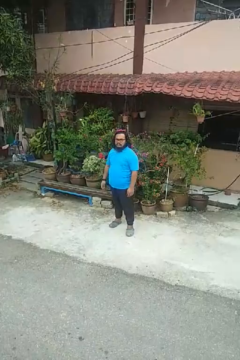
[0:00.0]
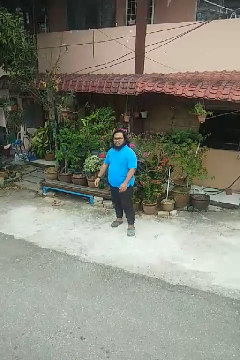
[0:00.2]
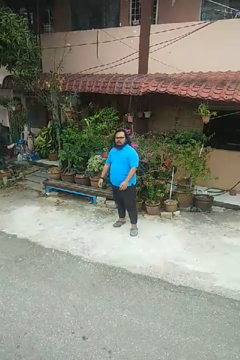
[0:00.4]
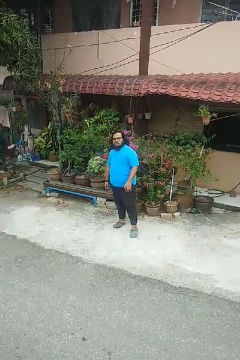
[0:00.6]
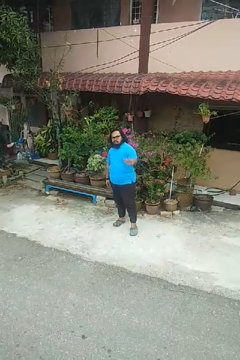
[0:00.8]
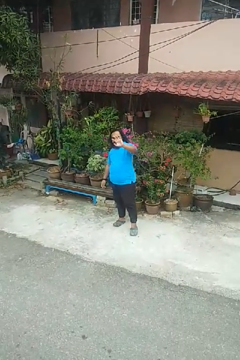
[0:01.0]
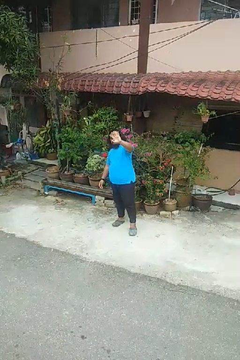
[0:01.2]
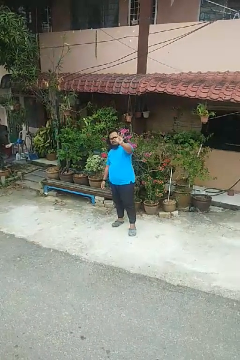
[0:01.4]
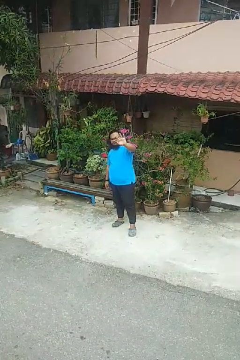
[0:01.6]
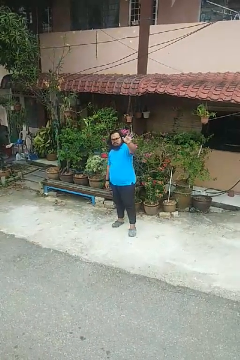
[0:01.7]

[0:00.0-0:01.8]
person waves at person

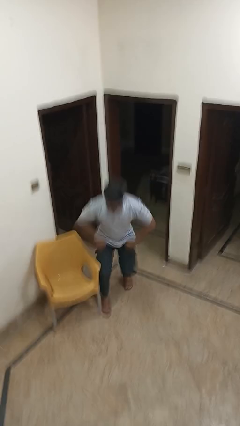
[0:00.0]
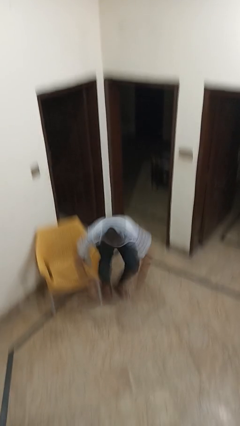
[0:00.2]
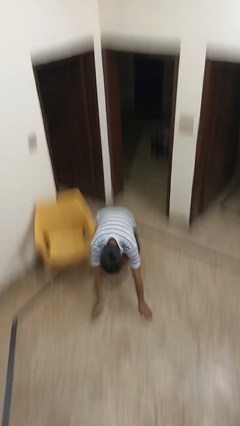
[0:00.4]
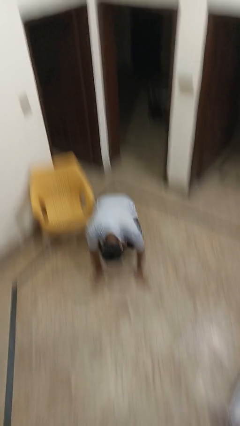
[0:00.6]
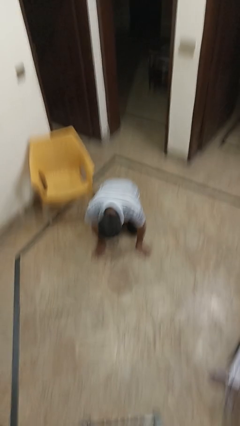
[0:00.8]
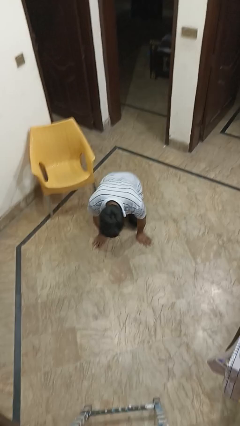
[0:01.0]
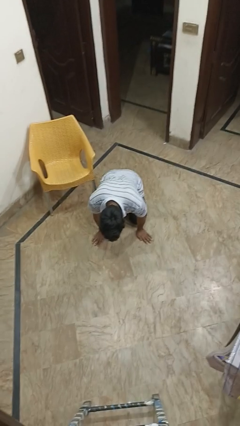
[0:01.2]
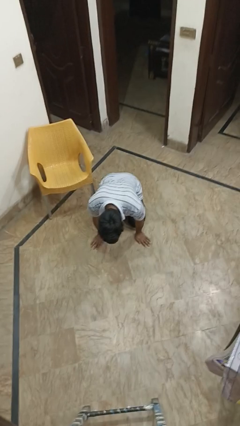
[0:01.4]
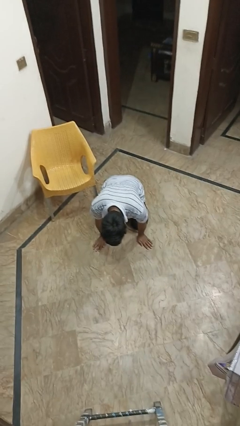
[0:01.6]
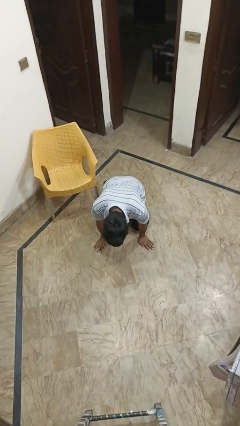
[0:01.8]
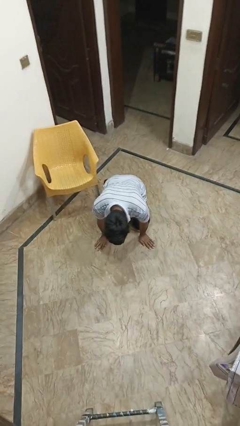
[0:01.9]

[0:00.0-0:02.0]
person trips on object on floor

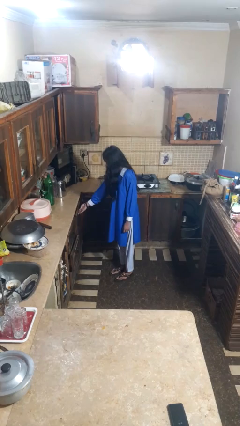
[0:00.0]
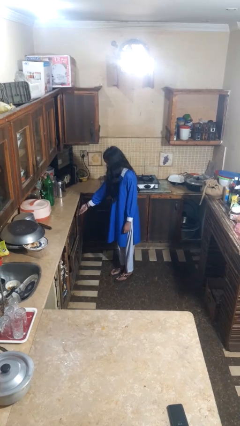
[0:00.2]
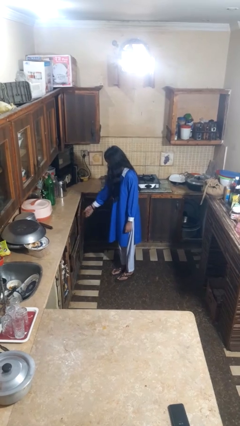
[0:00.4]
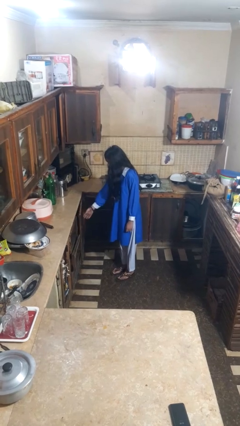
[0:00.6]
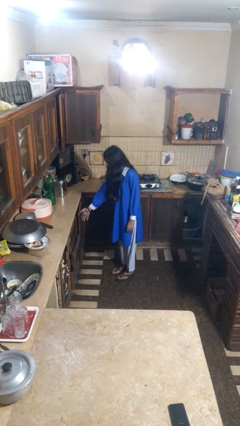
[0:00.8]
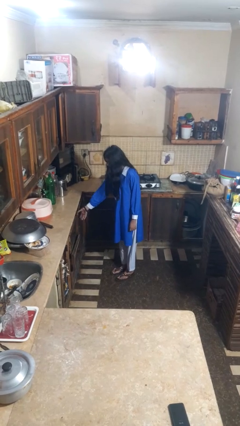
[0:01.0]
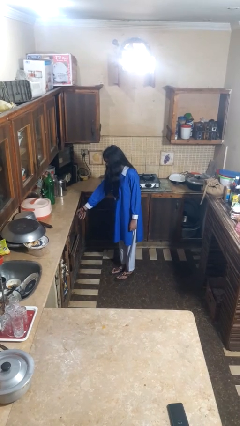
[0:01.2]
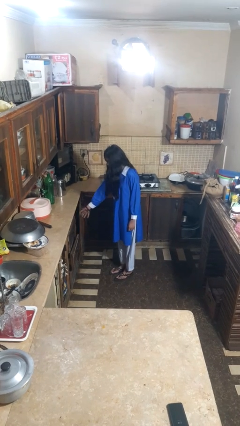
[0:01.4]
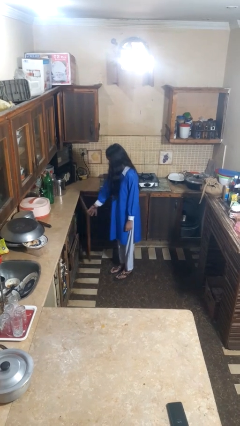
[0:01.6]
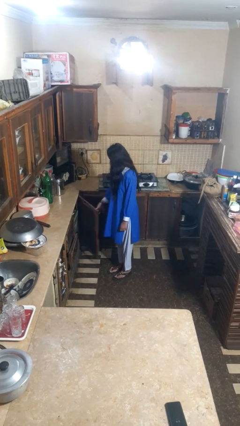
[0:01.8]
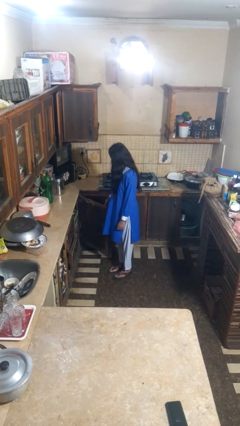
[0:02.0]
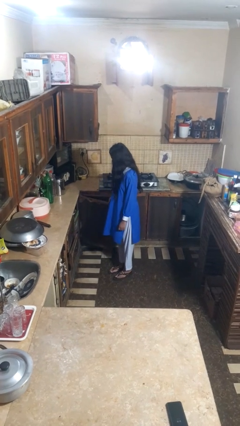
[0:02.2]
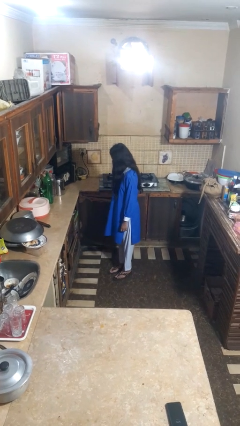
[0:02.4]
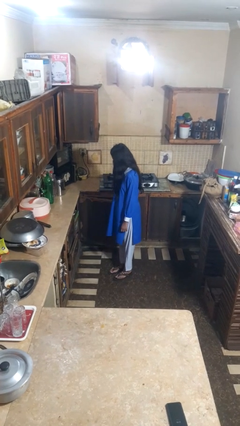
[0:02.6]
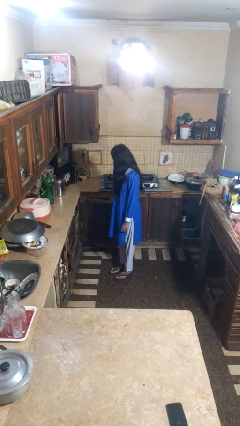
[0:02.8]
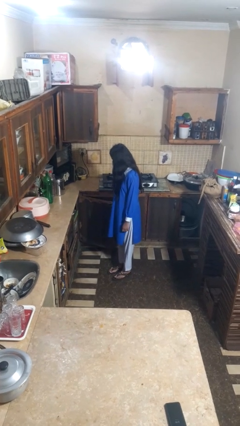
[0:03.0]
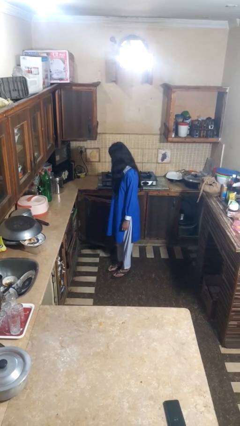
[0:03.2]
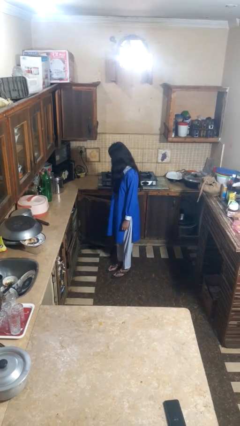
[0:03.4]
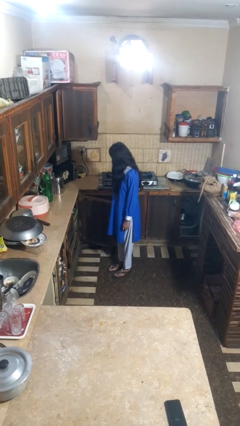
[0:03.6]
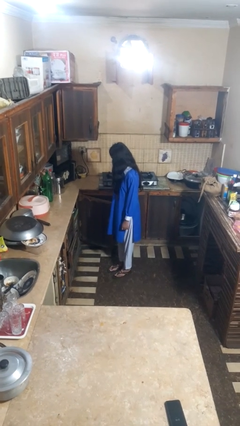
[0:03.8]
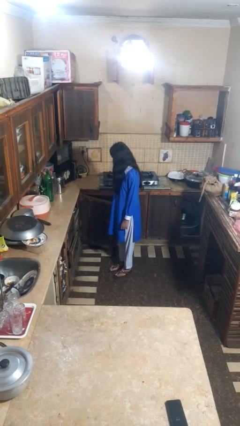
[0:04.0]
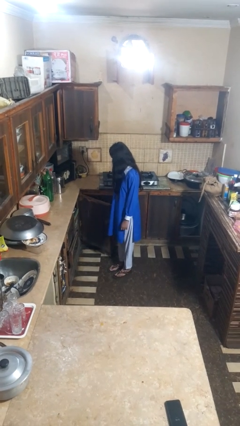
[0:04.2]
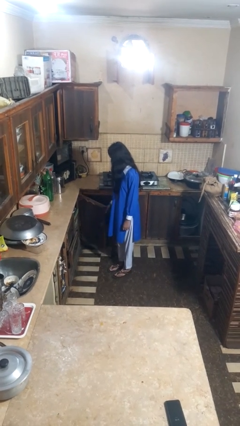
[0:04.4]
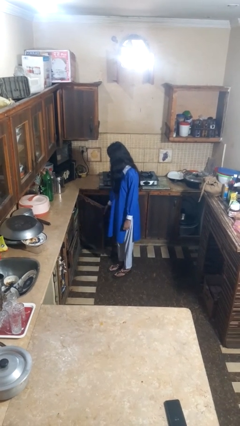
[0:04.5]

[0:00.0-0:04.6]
person opens closet door

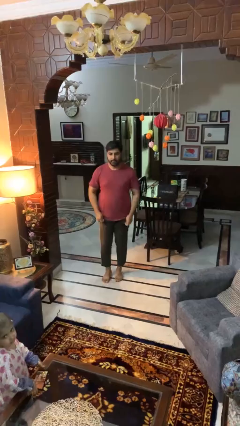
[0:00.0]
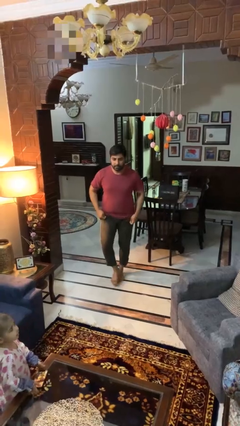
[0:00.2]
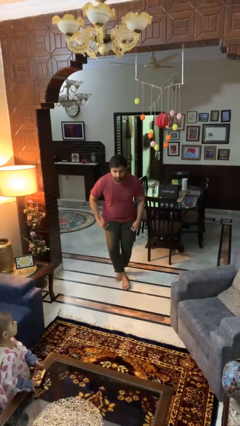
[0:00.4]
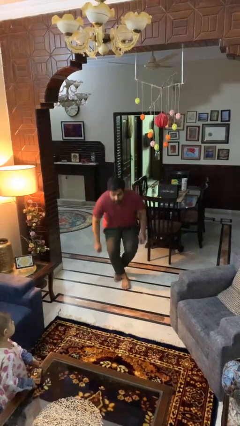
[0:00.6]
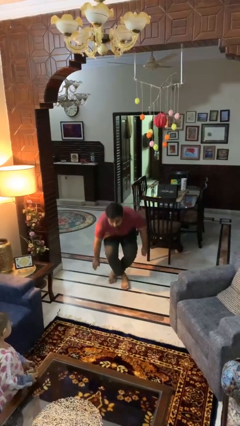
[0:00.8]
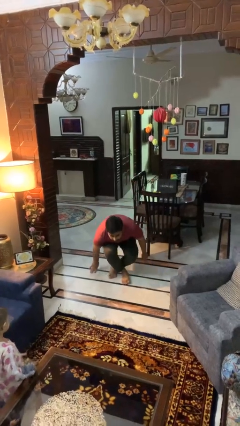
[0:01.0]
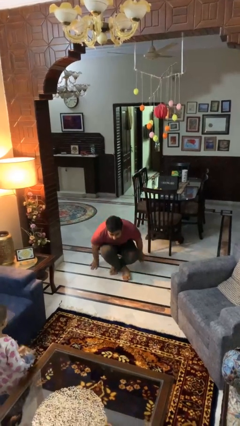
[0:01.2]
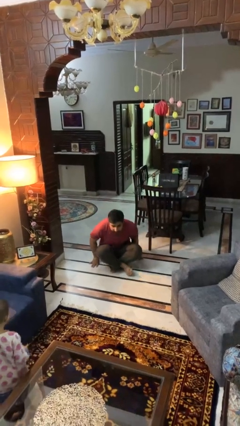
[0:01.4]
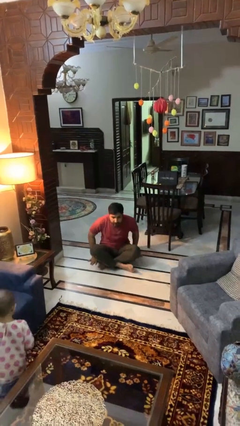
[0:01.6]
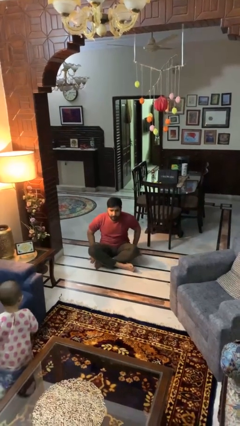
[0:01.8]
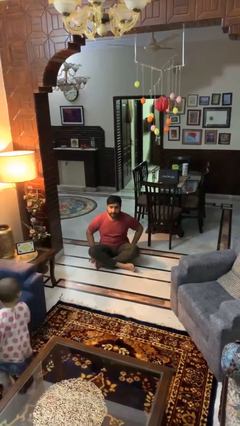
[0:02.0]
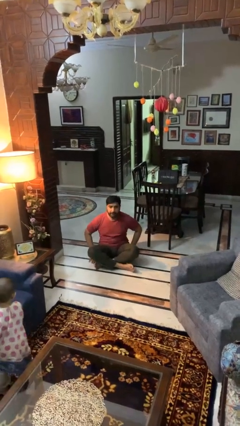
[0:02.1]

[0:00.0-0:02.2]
person sits crisscross

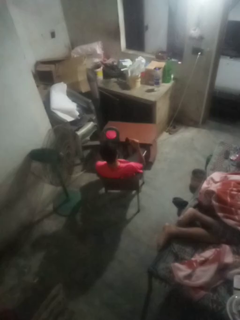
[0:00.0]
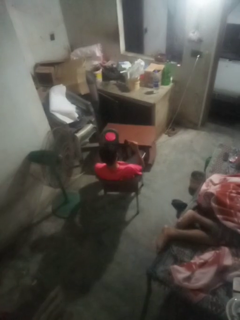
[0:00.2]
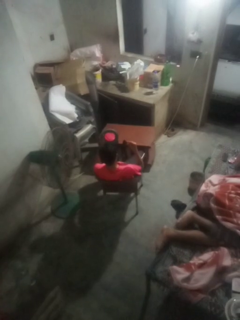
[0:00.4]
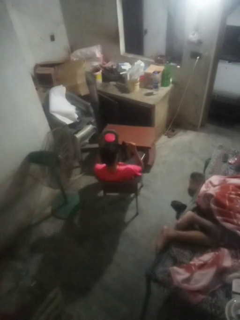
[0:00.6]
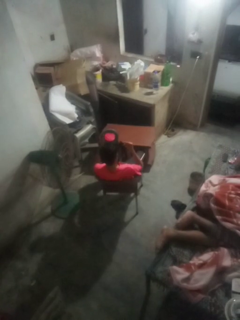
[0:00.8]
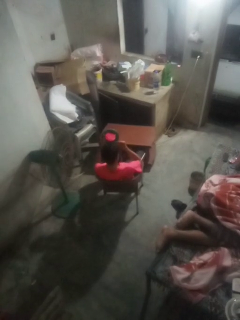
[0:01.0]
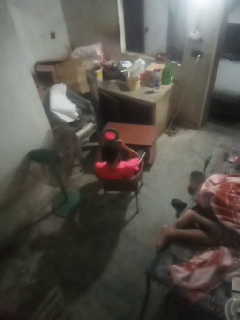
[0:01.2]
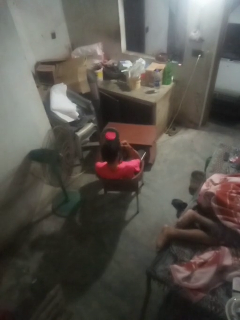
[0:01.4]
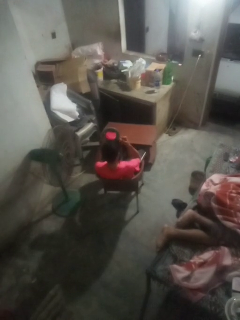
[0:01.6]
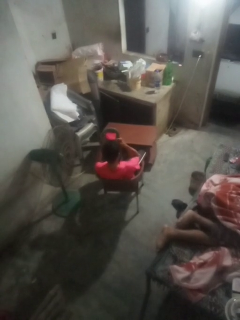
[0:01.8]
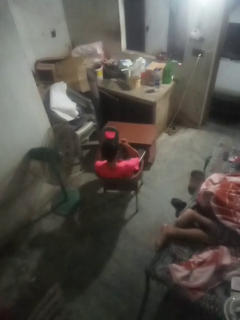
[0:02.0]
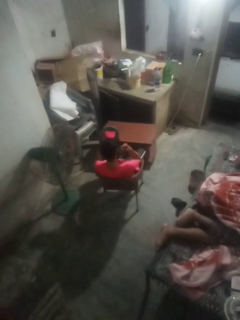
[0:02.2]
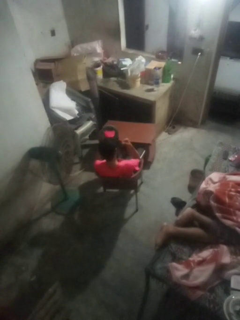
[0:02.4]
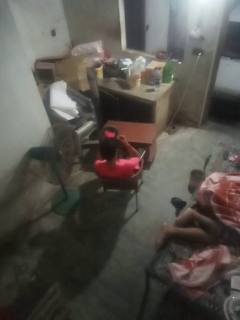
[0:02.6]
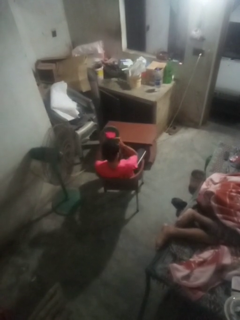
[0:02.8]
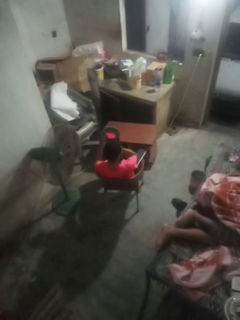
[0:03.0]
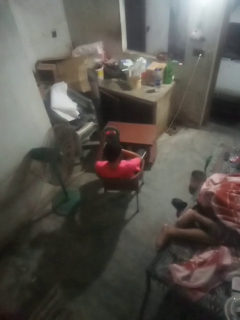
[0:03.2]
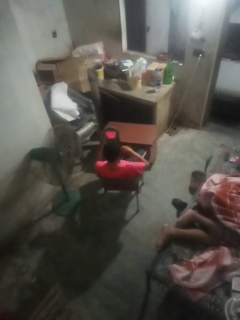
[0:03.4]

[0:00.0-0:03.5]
person applies foundation makeup

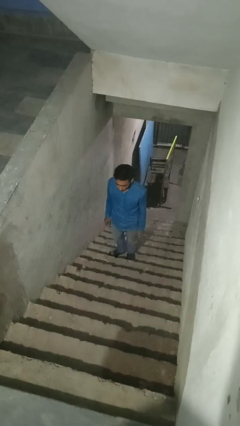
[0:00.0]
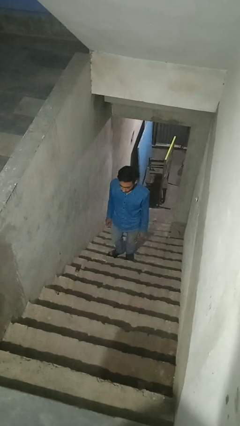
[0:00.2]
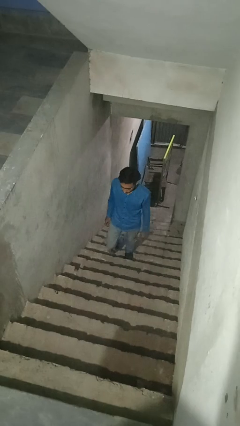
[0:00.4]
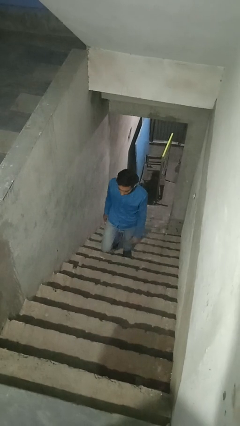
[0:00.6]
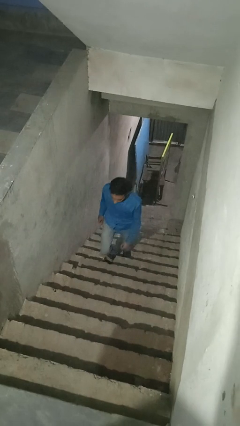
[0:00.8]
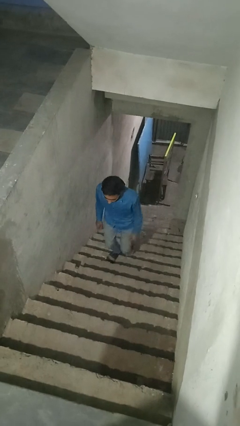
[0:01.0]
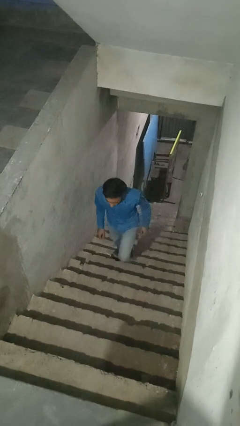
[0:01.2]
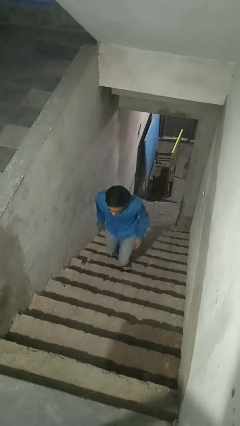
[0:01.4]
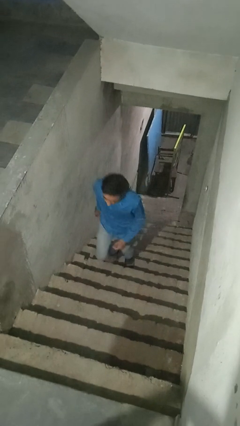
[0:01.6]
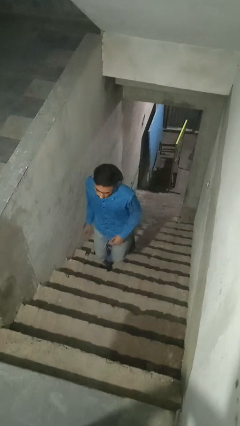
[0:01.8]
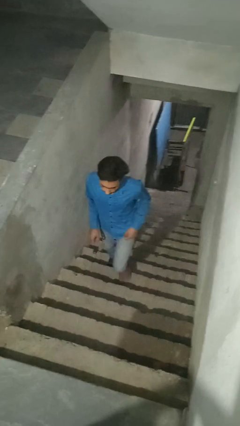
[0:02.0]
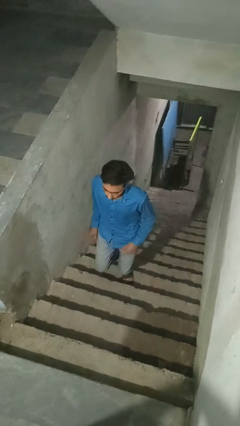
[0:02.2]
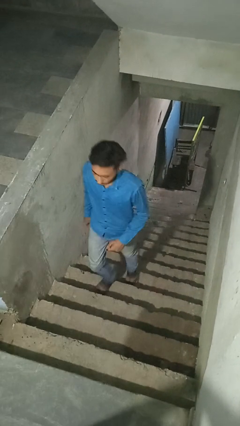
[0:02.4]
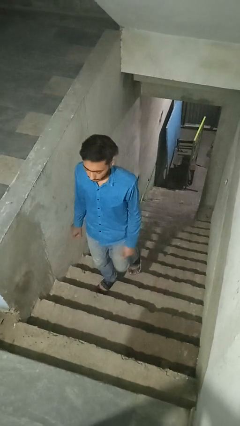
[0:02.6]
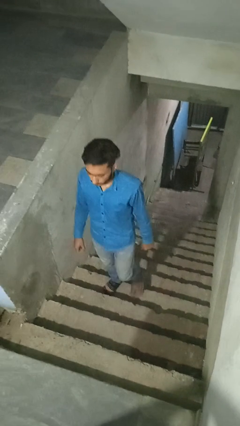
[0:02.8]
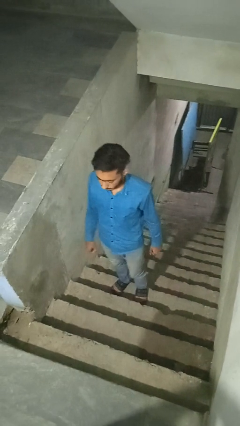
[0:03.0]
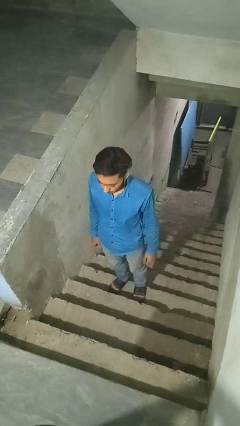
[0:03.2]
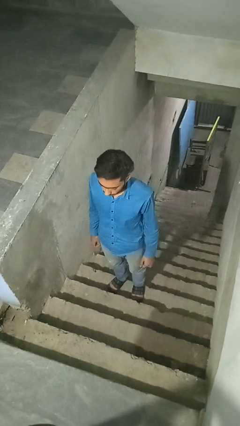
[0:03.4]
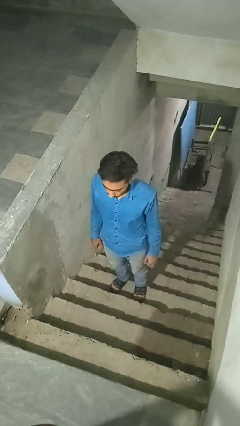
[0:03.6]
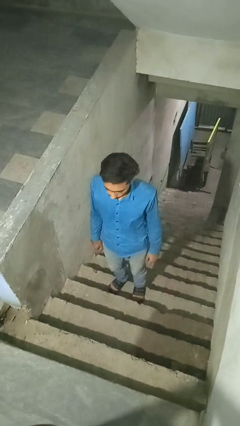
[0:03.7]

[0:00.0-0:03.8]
person climbs up stairs

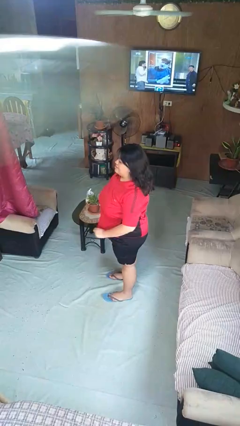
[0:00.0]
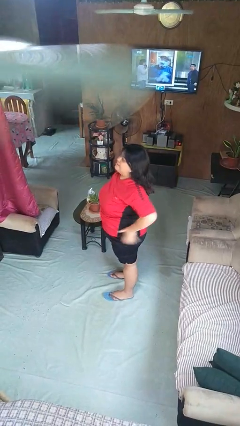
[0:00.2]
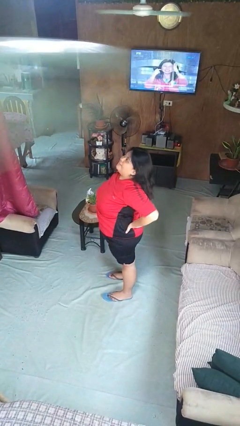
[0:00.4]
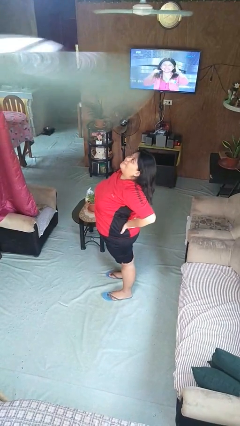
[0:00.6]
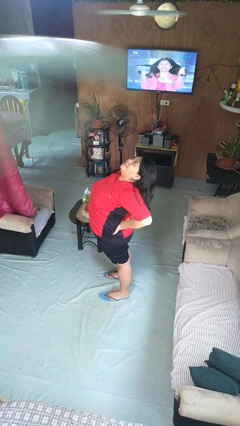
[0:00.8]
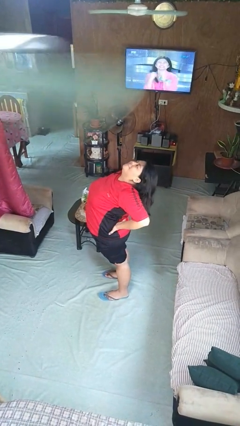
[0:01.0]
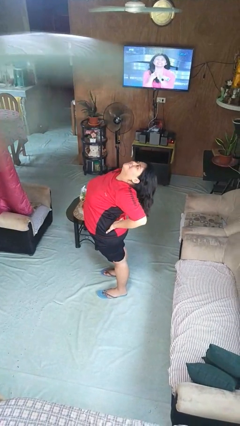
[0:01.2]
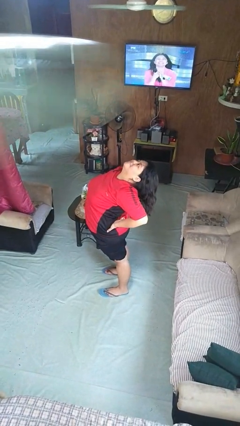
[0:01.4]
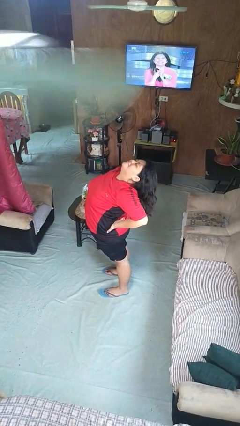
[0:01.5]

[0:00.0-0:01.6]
person stretches back
